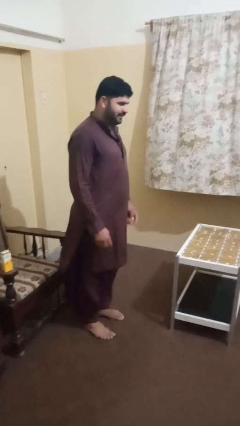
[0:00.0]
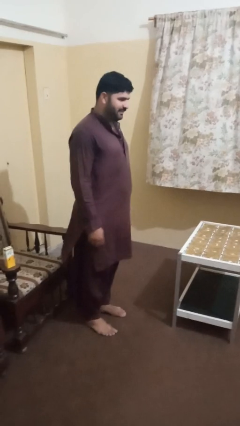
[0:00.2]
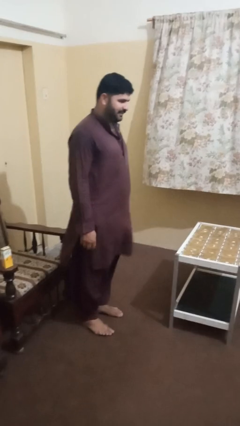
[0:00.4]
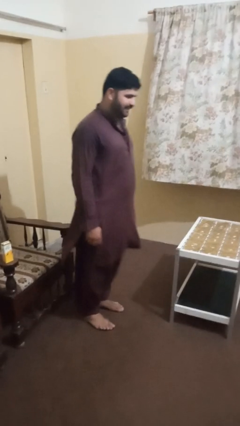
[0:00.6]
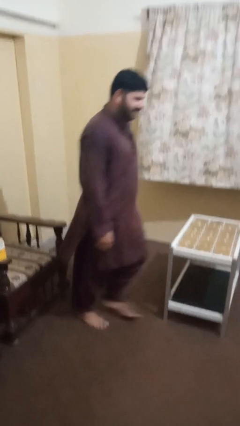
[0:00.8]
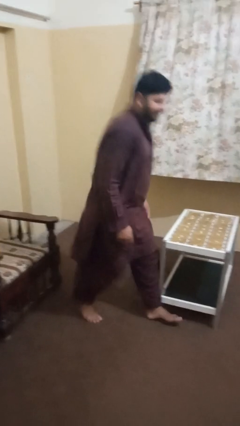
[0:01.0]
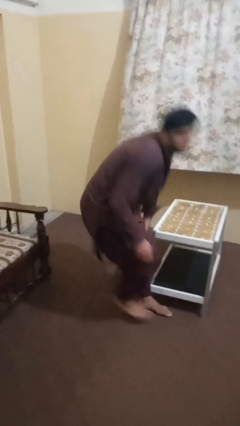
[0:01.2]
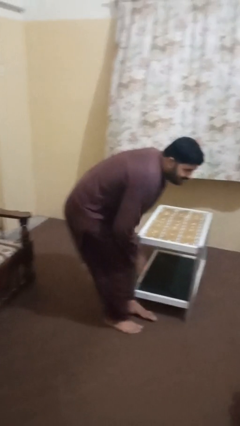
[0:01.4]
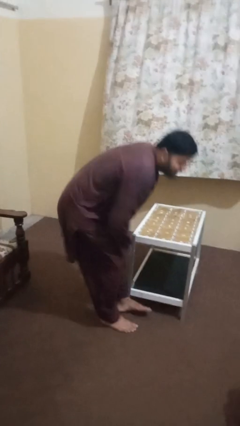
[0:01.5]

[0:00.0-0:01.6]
person bumps into table

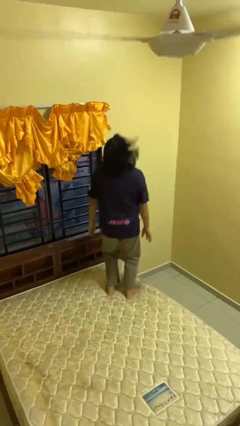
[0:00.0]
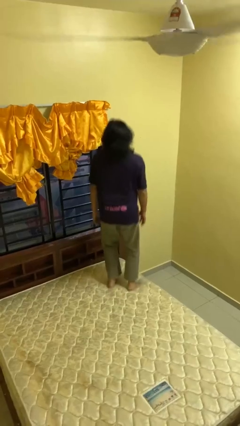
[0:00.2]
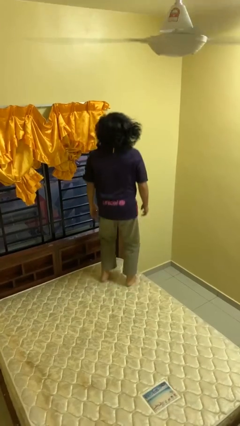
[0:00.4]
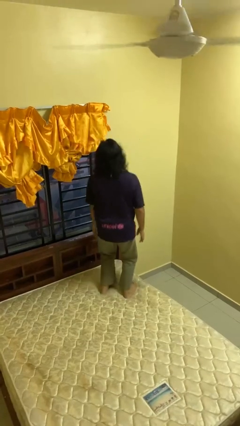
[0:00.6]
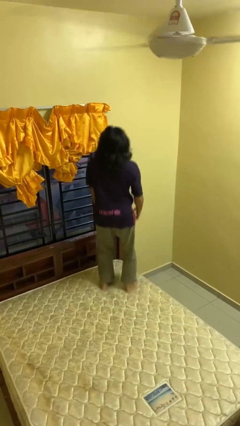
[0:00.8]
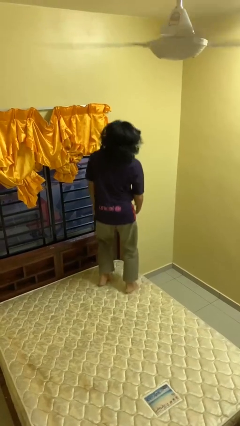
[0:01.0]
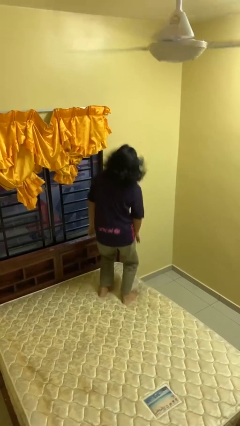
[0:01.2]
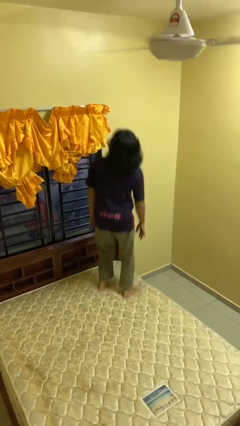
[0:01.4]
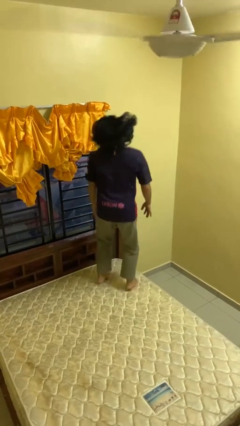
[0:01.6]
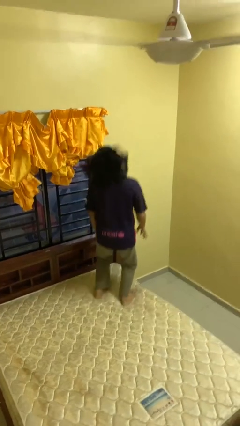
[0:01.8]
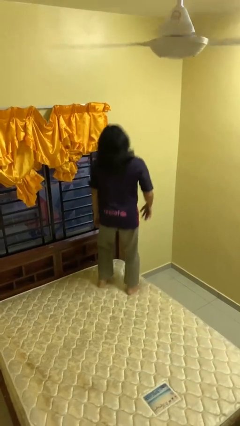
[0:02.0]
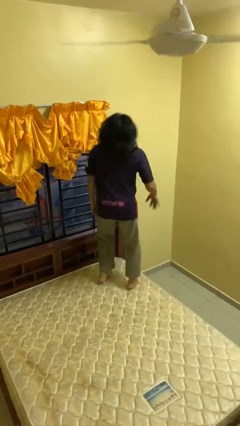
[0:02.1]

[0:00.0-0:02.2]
person jumps on bed

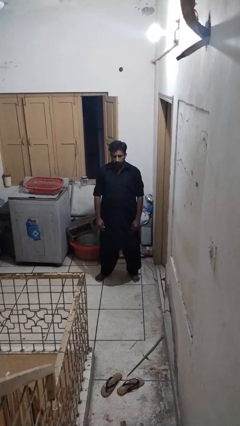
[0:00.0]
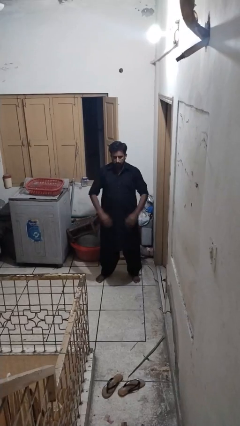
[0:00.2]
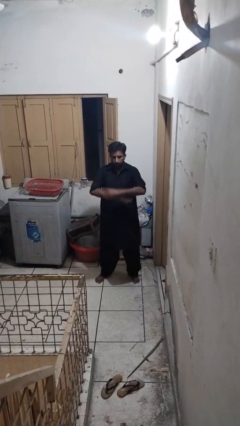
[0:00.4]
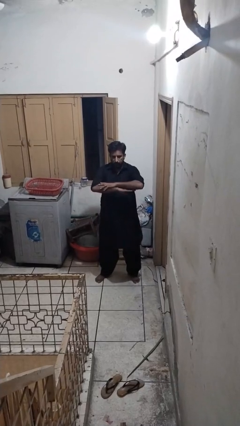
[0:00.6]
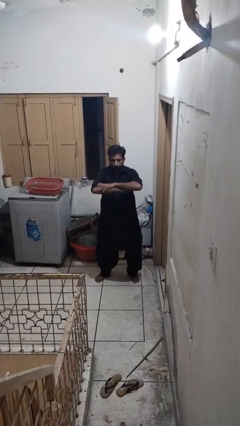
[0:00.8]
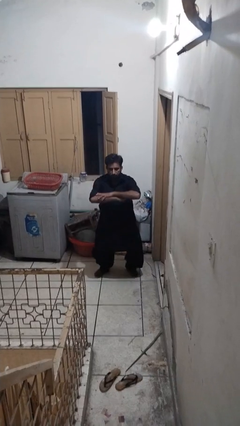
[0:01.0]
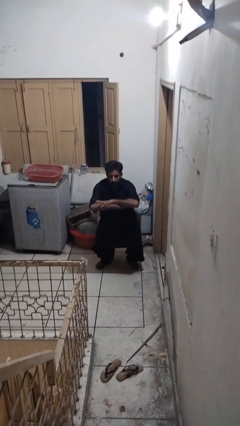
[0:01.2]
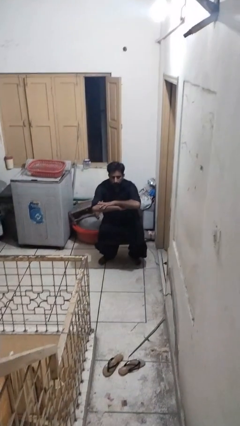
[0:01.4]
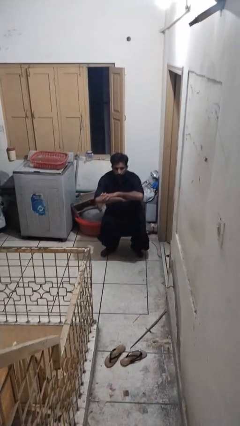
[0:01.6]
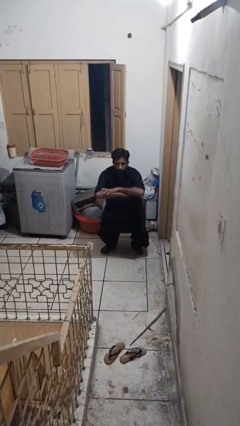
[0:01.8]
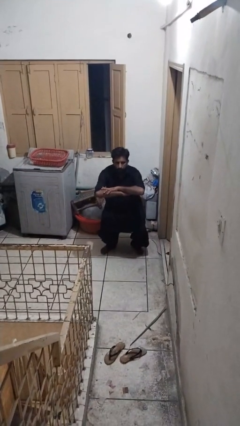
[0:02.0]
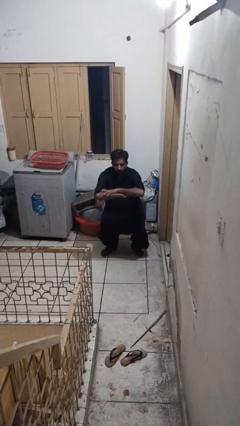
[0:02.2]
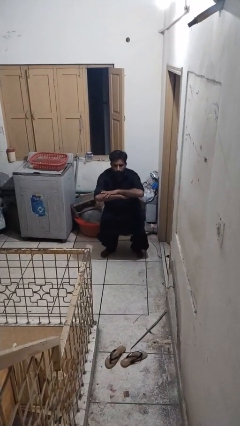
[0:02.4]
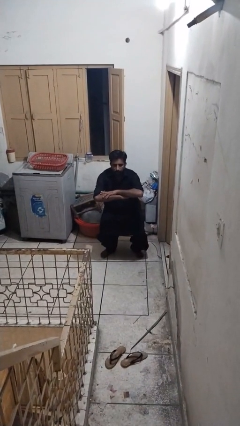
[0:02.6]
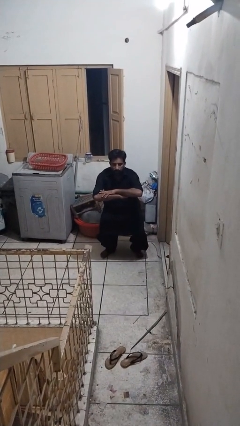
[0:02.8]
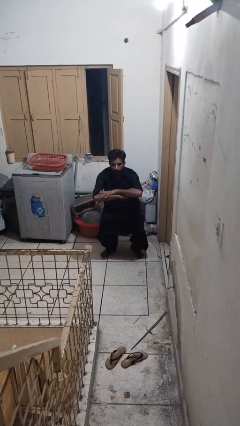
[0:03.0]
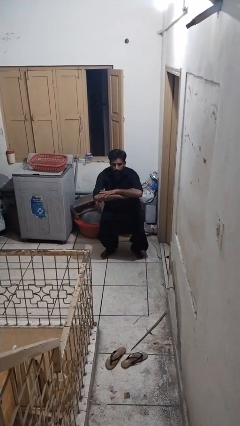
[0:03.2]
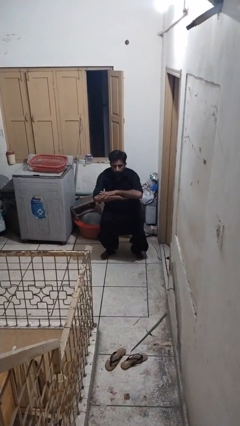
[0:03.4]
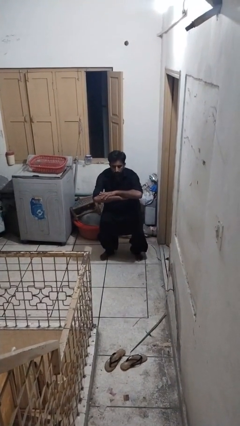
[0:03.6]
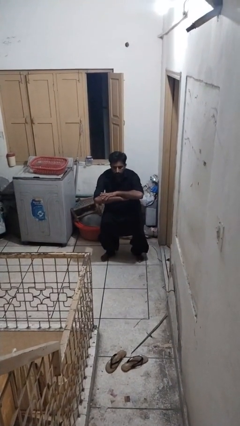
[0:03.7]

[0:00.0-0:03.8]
person squats

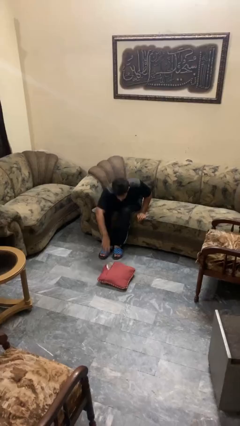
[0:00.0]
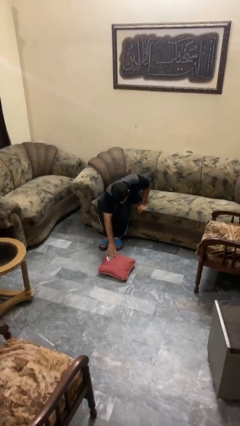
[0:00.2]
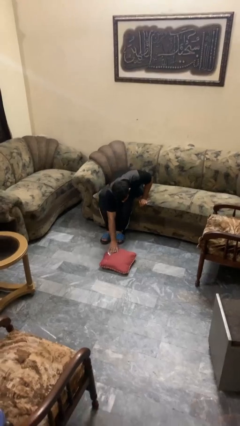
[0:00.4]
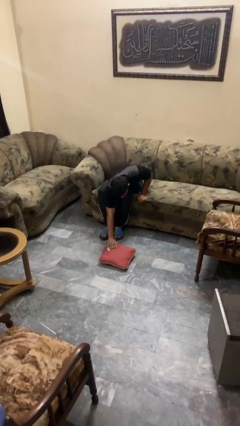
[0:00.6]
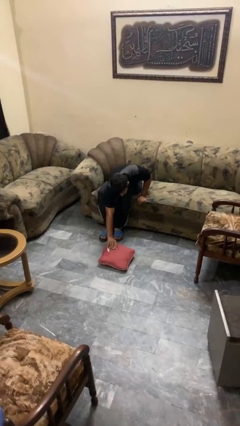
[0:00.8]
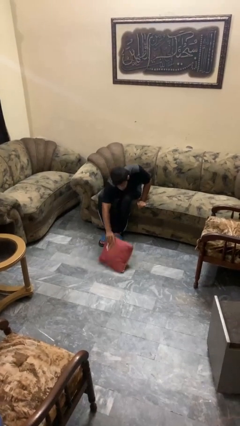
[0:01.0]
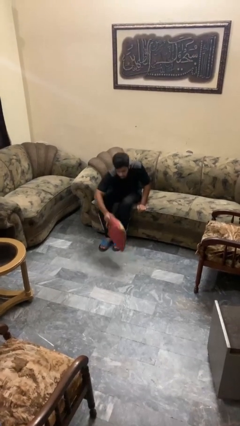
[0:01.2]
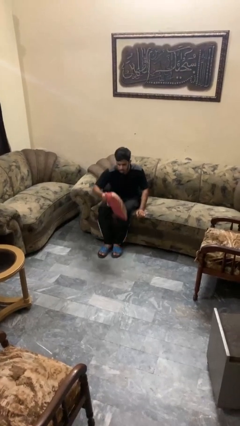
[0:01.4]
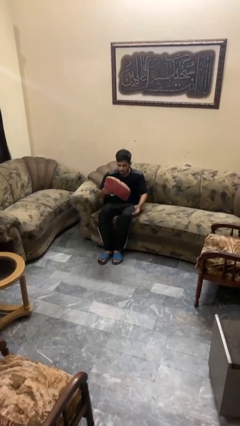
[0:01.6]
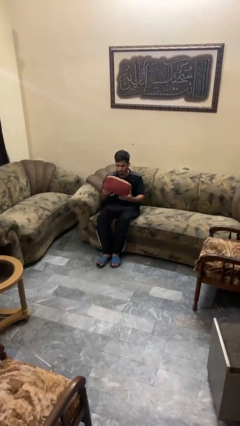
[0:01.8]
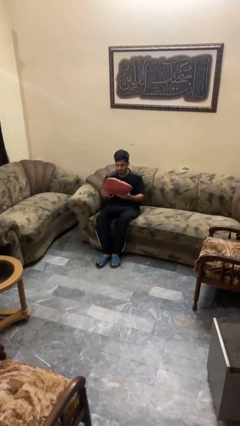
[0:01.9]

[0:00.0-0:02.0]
person picks up object from floor

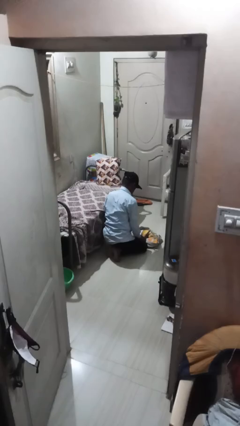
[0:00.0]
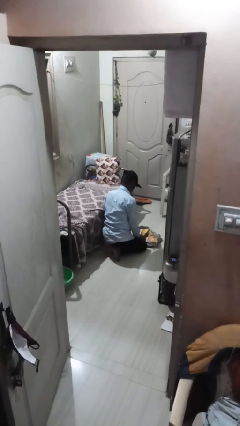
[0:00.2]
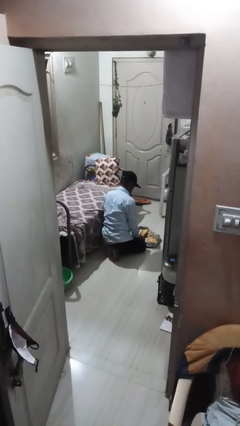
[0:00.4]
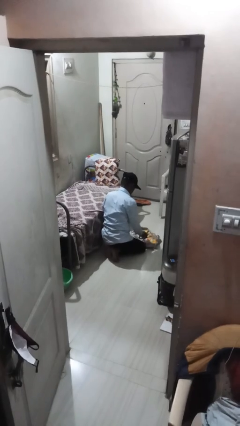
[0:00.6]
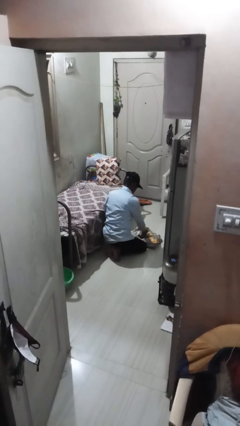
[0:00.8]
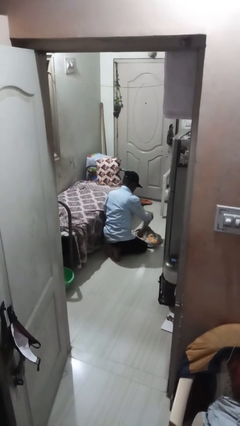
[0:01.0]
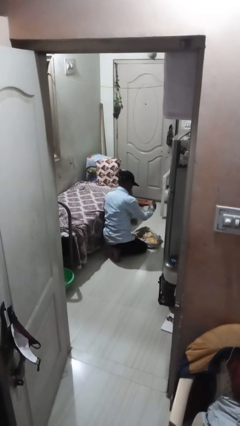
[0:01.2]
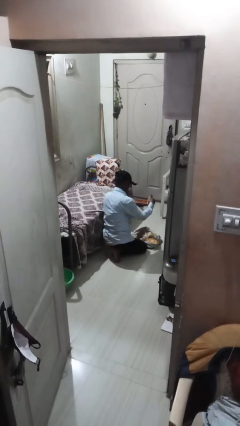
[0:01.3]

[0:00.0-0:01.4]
person takes object from bag

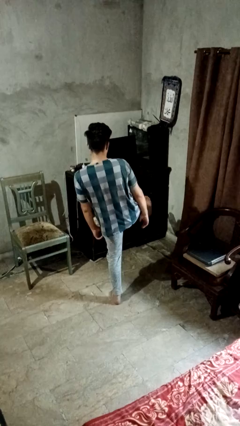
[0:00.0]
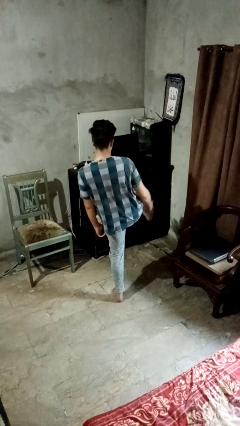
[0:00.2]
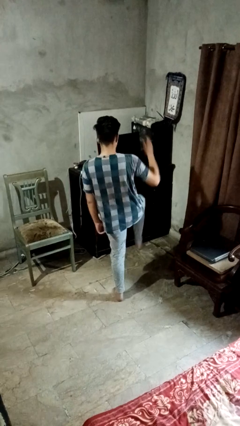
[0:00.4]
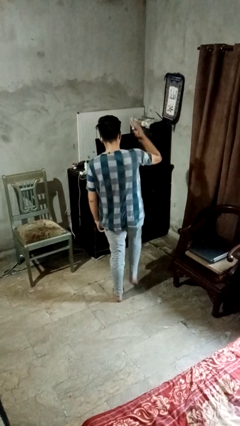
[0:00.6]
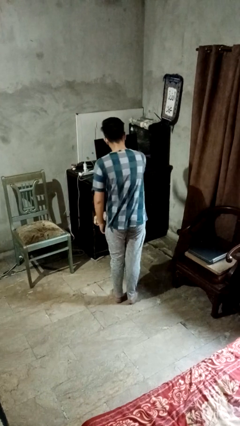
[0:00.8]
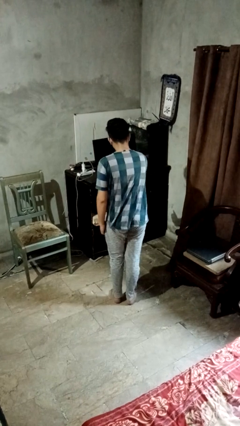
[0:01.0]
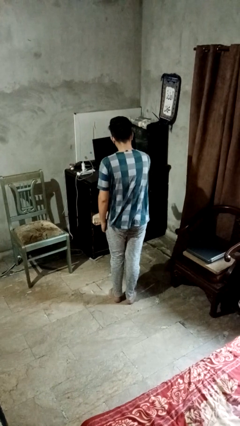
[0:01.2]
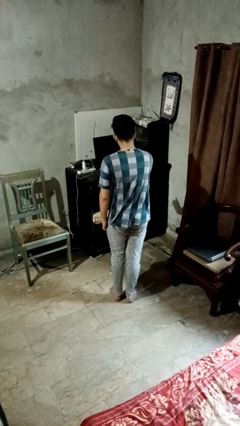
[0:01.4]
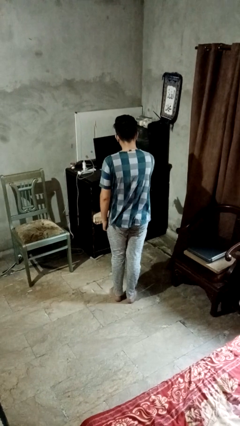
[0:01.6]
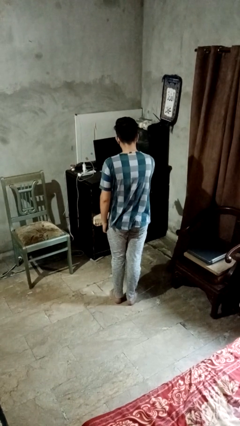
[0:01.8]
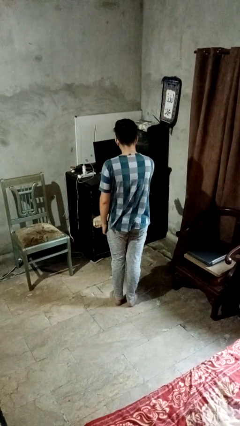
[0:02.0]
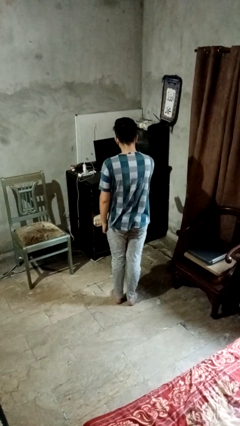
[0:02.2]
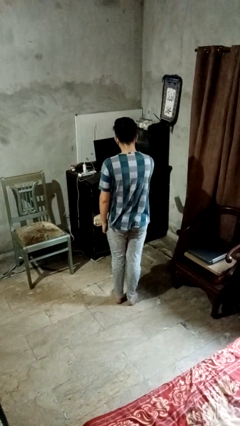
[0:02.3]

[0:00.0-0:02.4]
person karate chop

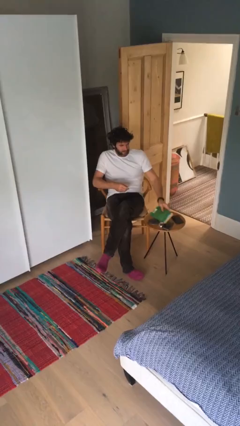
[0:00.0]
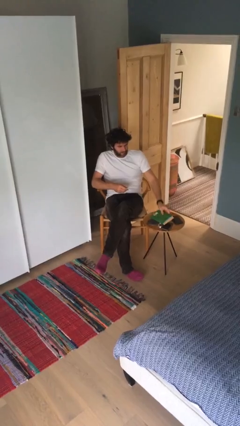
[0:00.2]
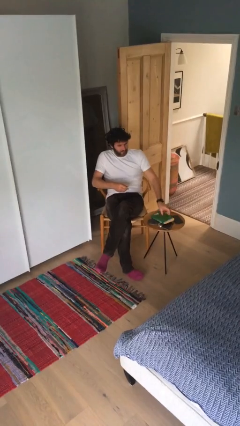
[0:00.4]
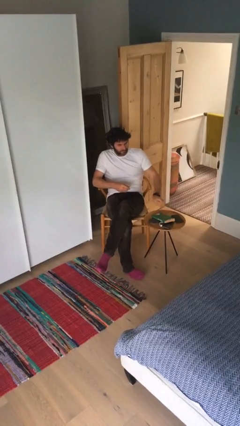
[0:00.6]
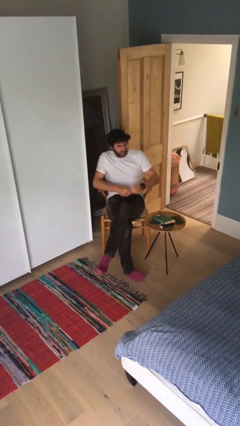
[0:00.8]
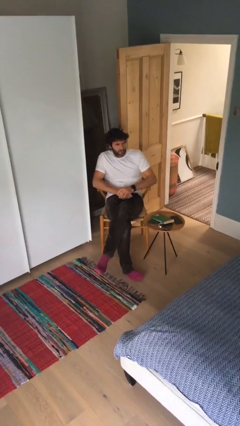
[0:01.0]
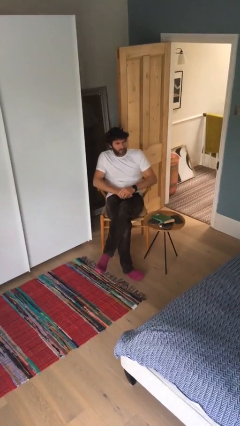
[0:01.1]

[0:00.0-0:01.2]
person puts down object on table

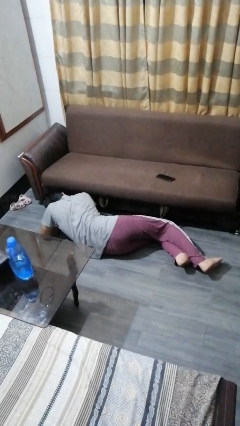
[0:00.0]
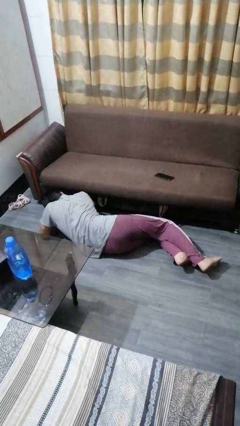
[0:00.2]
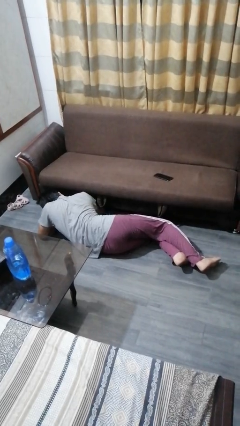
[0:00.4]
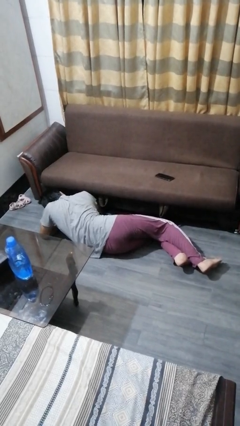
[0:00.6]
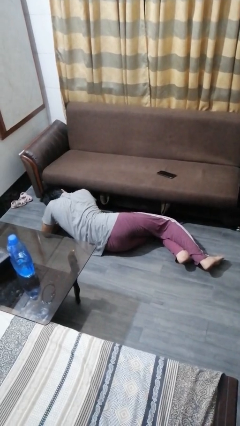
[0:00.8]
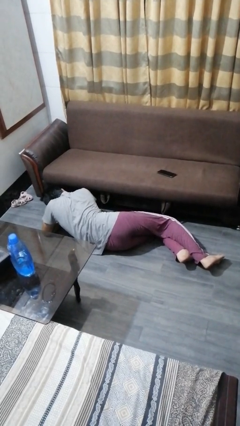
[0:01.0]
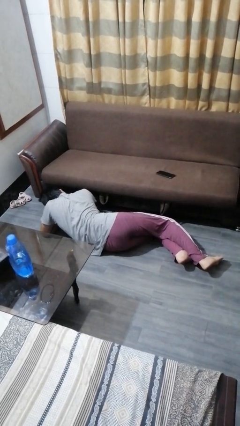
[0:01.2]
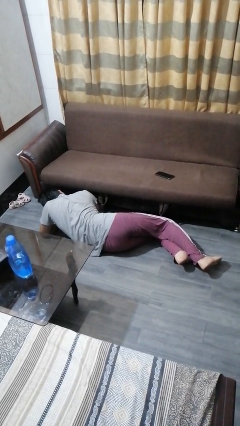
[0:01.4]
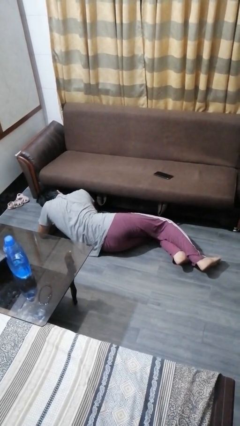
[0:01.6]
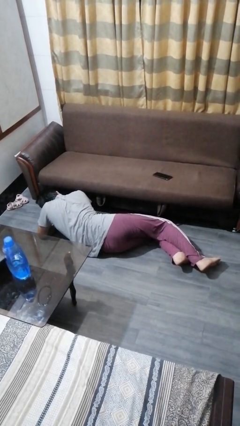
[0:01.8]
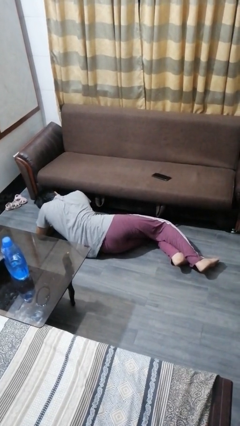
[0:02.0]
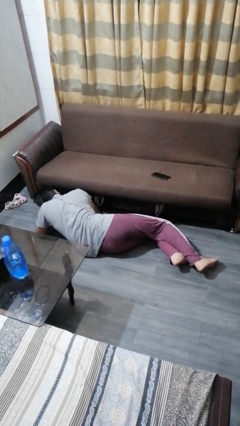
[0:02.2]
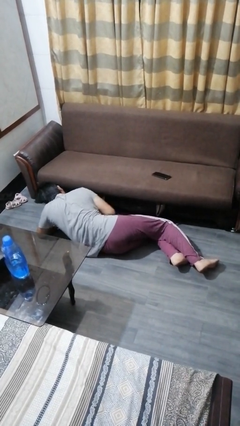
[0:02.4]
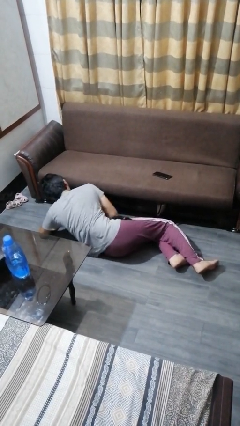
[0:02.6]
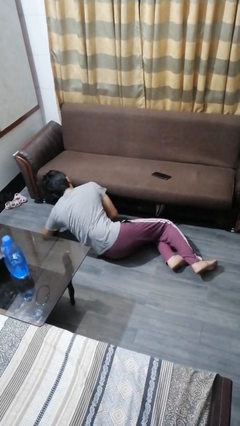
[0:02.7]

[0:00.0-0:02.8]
person searches under couch
